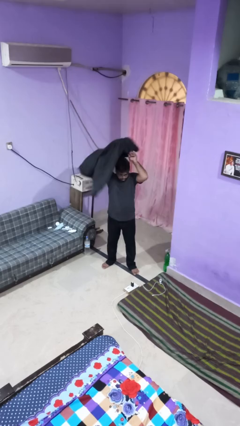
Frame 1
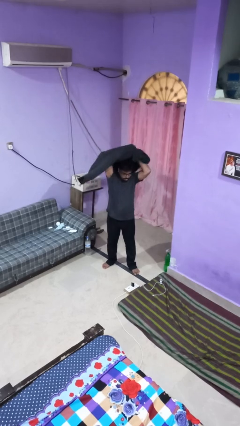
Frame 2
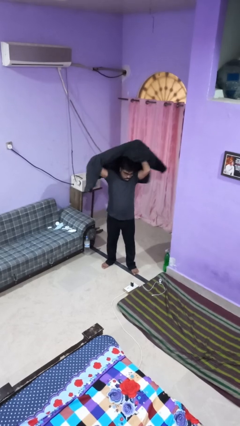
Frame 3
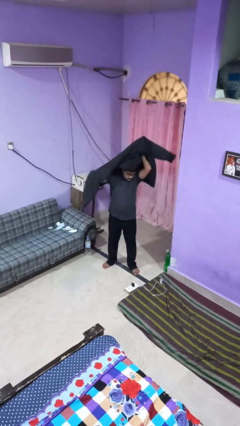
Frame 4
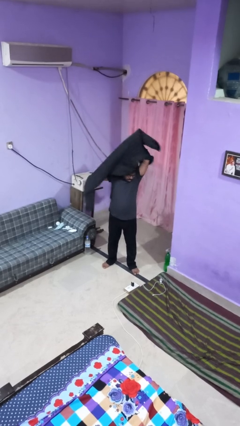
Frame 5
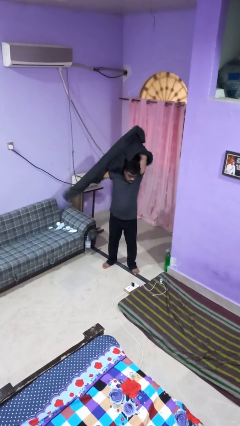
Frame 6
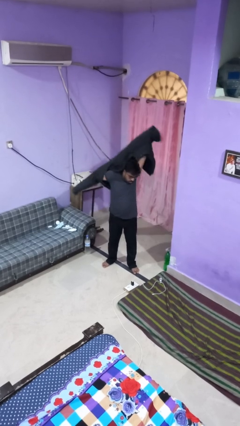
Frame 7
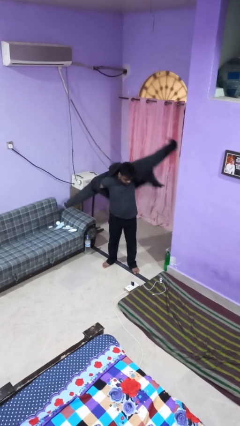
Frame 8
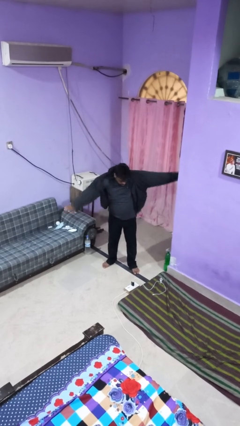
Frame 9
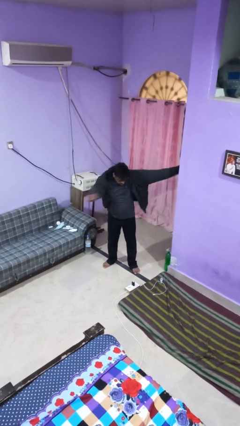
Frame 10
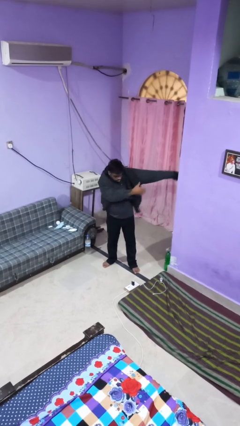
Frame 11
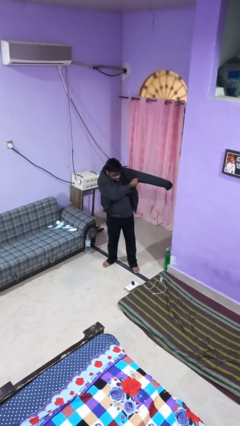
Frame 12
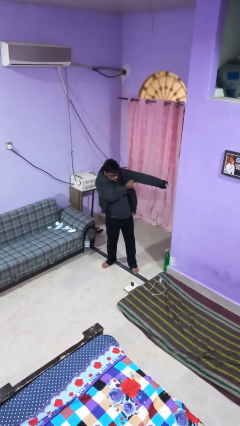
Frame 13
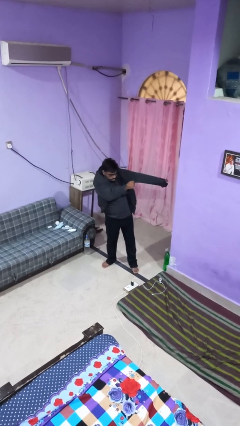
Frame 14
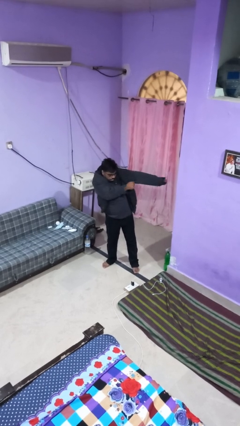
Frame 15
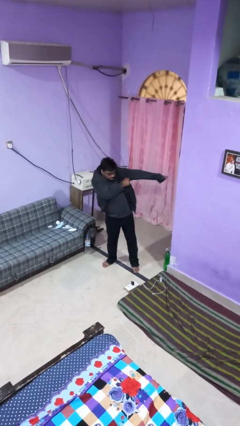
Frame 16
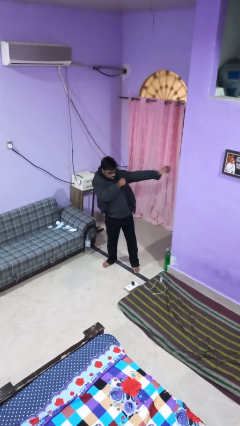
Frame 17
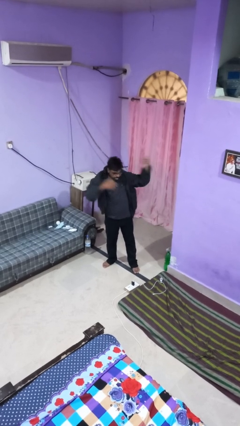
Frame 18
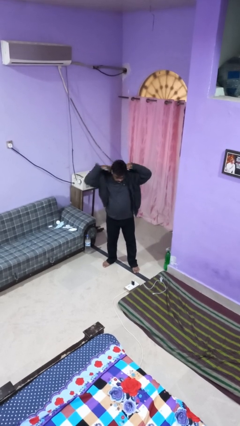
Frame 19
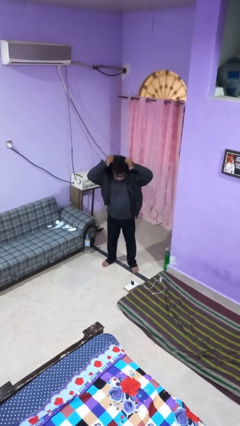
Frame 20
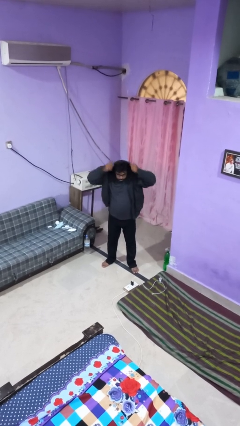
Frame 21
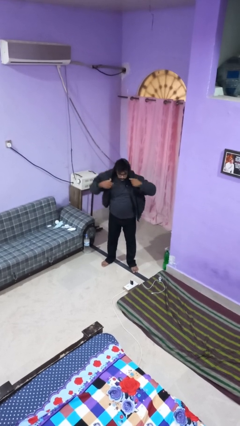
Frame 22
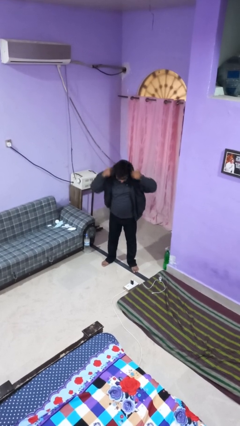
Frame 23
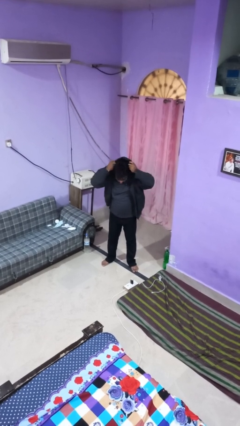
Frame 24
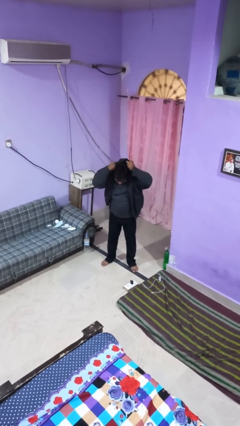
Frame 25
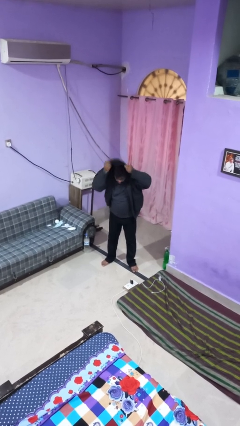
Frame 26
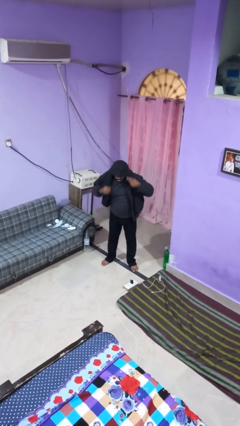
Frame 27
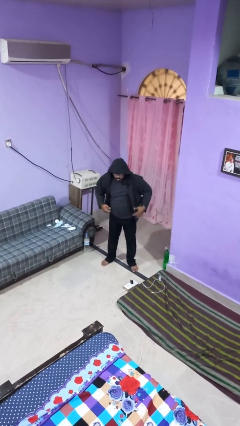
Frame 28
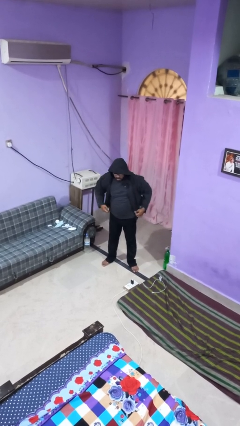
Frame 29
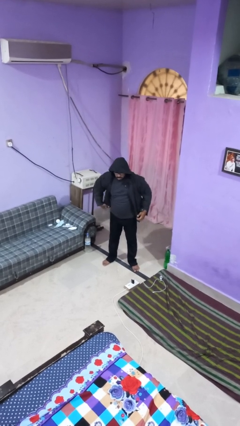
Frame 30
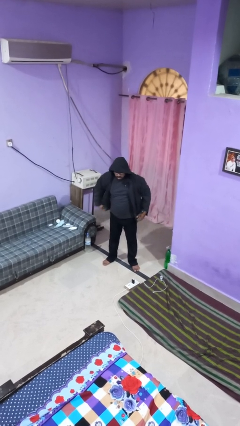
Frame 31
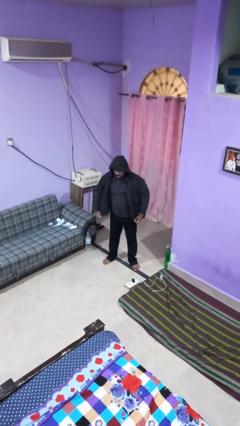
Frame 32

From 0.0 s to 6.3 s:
person puts on hoodie

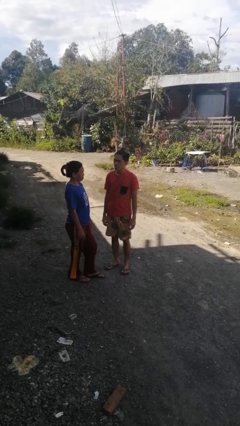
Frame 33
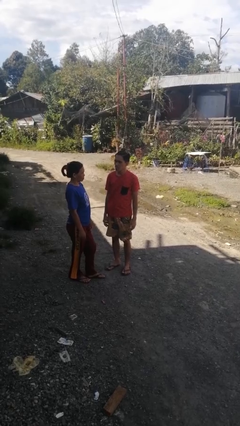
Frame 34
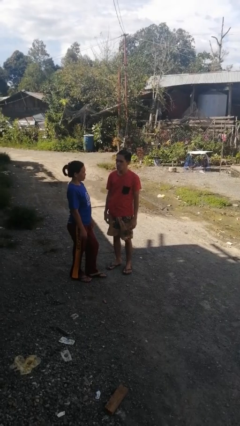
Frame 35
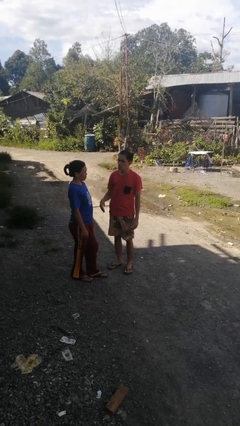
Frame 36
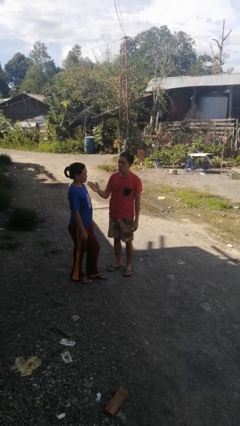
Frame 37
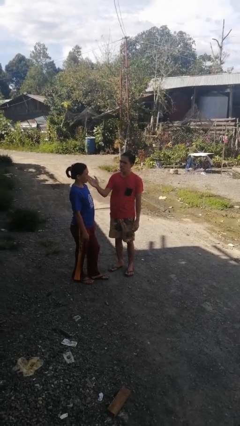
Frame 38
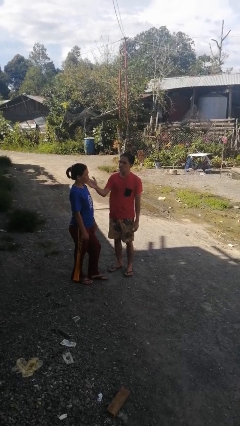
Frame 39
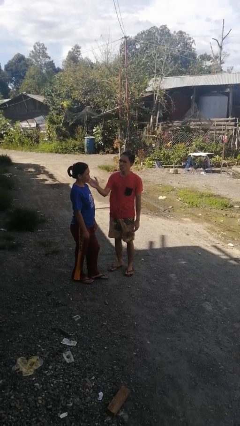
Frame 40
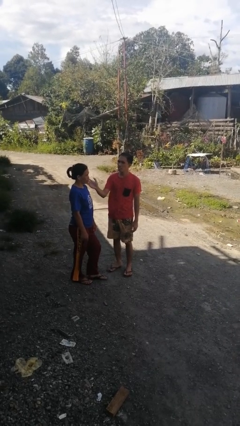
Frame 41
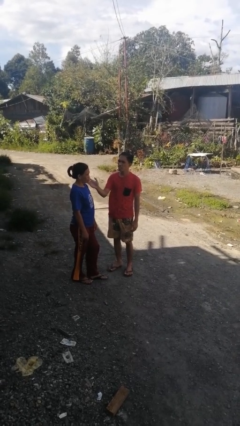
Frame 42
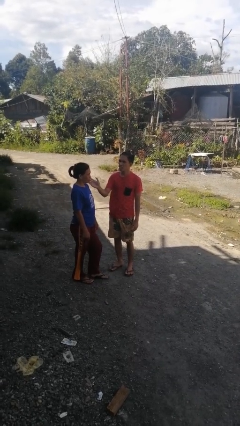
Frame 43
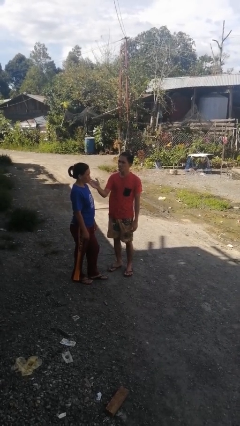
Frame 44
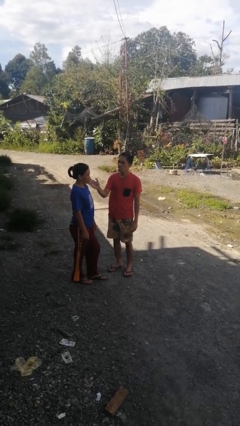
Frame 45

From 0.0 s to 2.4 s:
person touches face of person

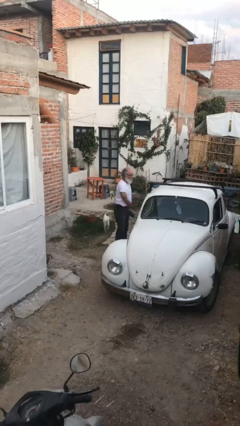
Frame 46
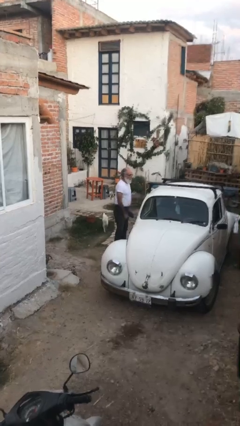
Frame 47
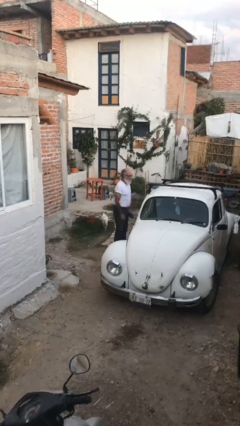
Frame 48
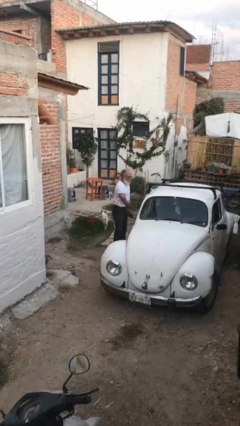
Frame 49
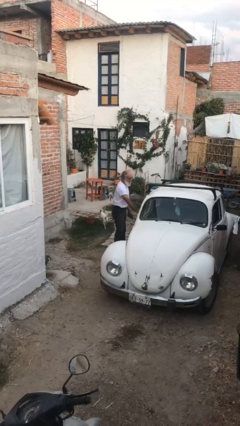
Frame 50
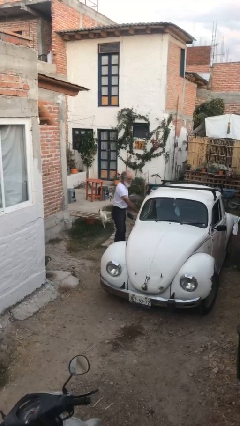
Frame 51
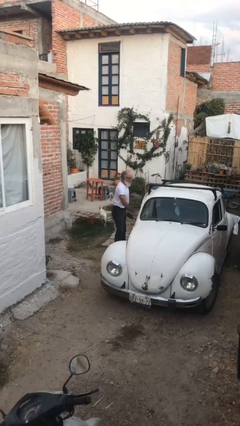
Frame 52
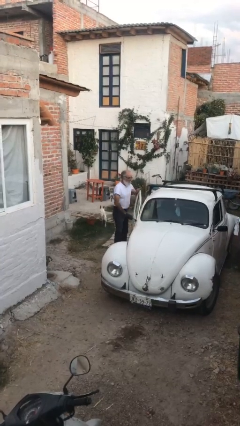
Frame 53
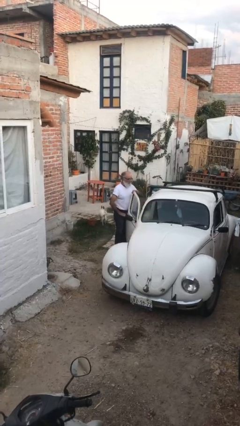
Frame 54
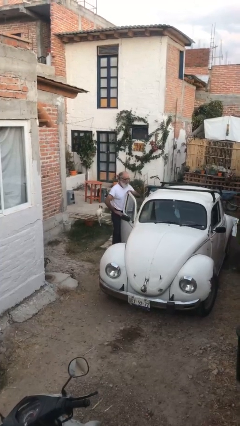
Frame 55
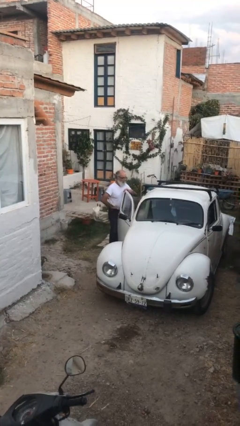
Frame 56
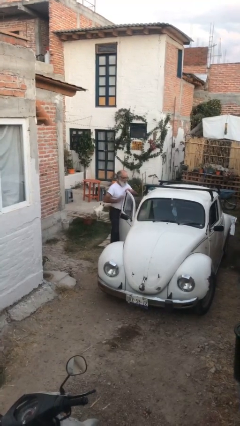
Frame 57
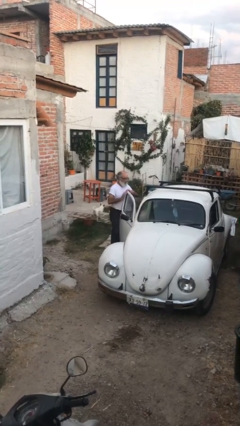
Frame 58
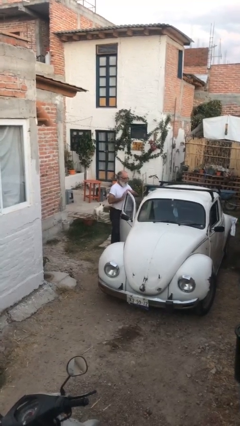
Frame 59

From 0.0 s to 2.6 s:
person opens car door

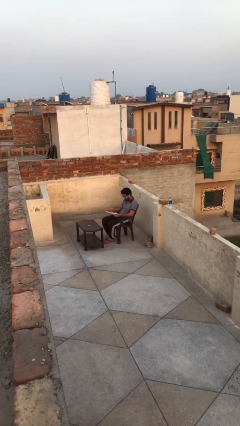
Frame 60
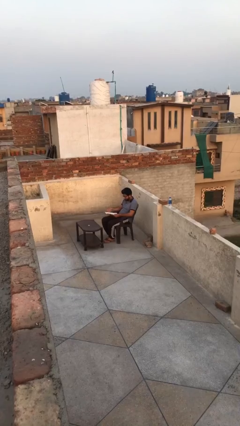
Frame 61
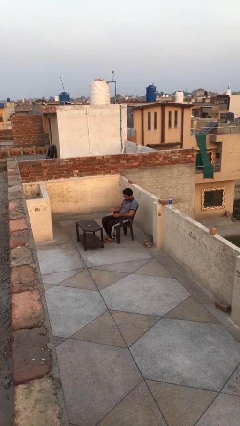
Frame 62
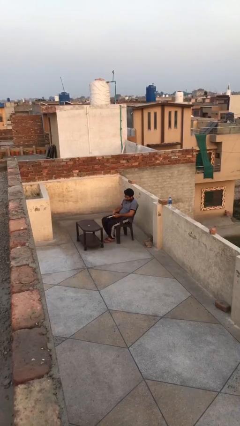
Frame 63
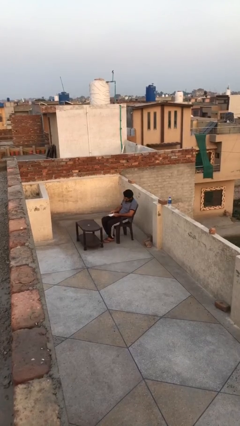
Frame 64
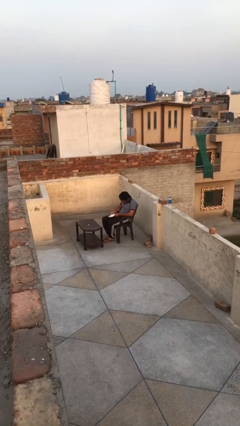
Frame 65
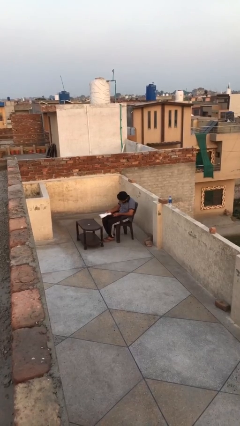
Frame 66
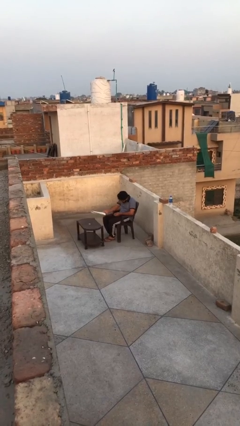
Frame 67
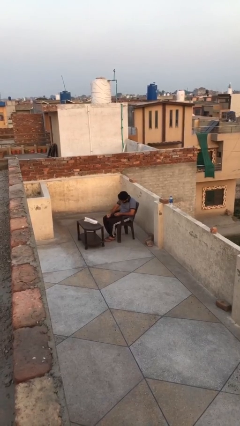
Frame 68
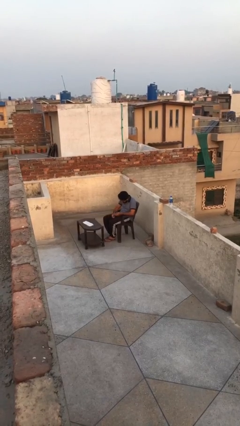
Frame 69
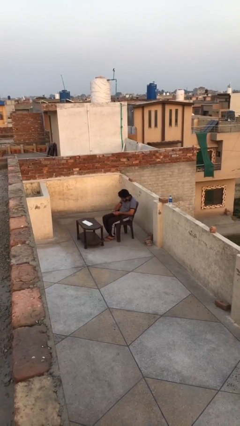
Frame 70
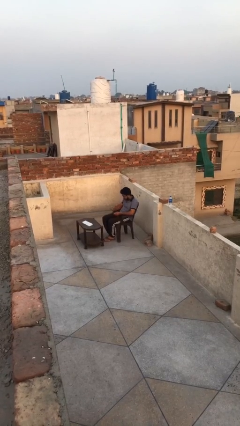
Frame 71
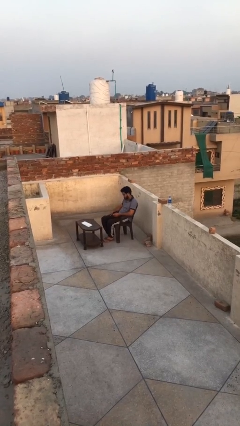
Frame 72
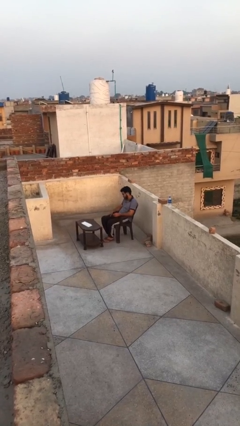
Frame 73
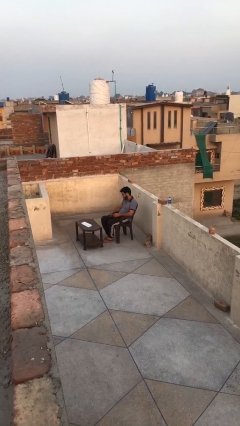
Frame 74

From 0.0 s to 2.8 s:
person puts down object on table

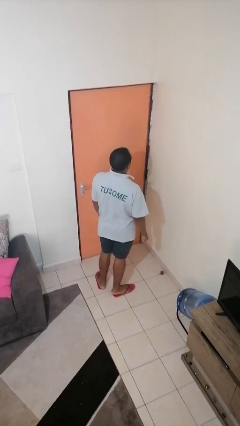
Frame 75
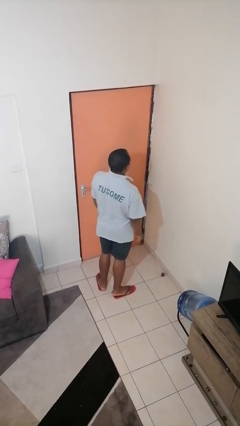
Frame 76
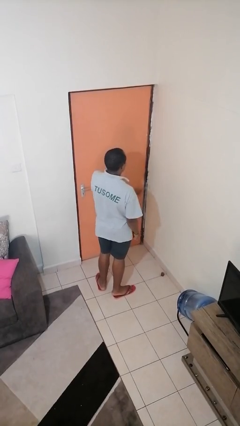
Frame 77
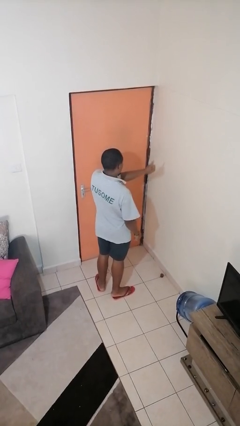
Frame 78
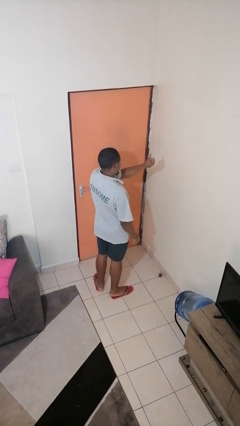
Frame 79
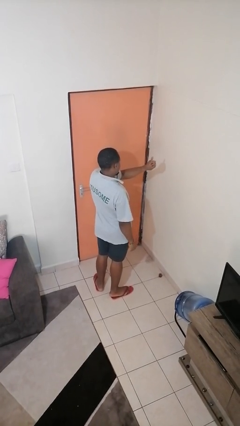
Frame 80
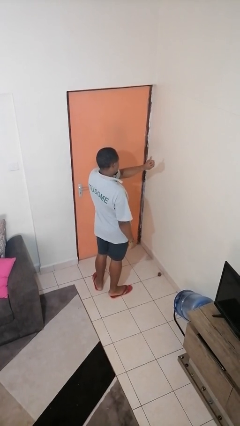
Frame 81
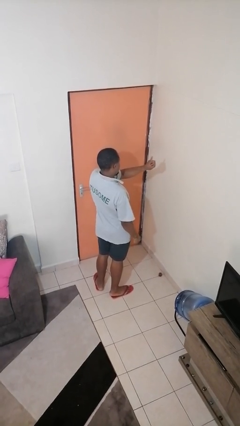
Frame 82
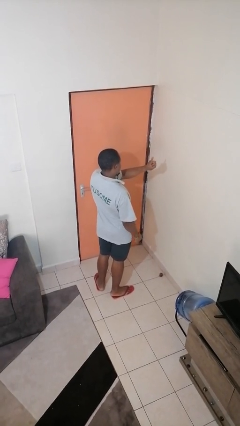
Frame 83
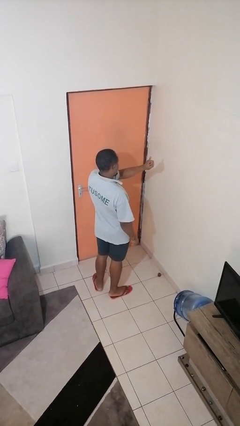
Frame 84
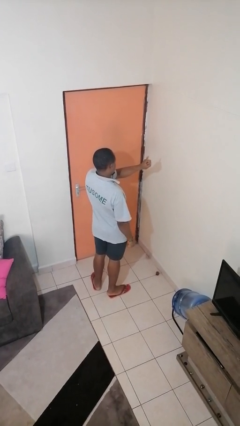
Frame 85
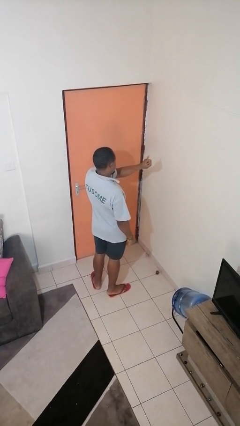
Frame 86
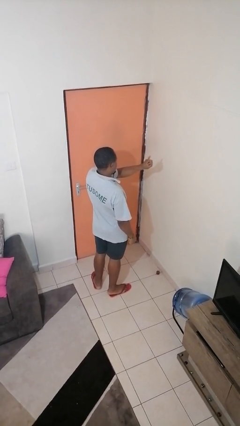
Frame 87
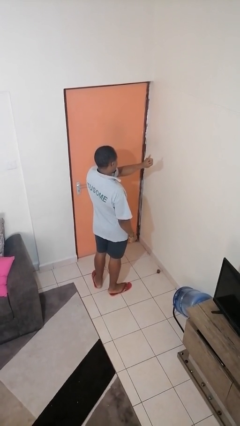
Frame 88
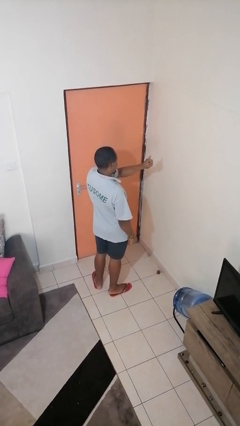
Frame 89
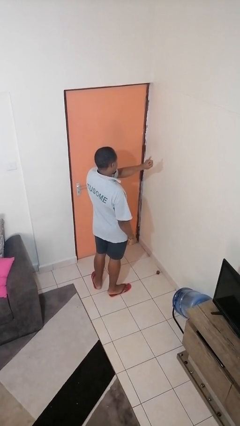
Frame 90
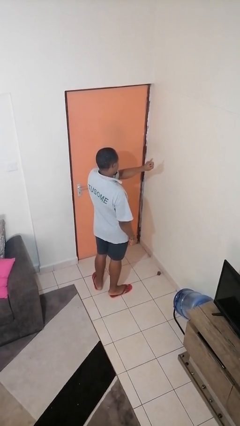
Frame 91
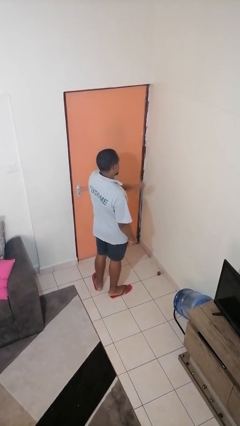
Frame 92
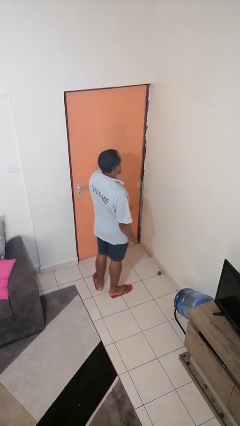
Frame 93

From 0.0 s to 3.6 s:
person gestures number one
